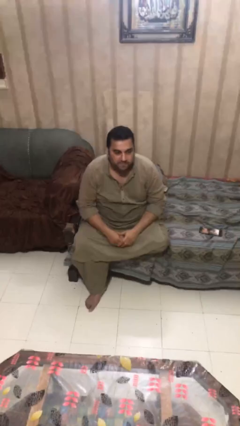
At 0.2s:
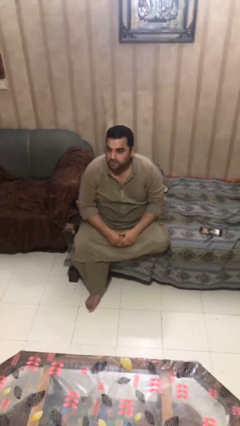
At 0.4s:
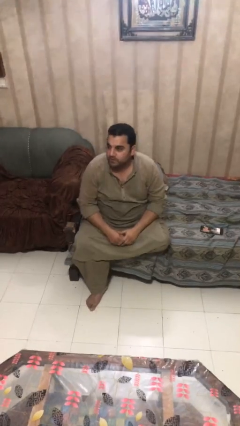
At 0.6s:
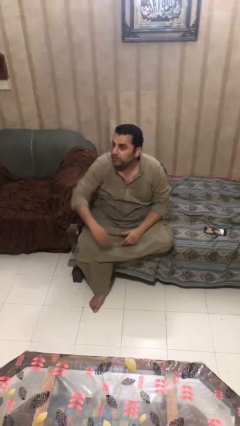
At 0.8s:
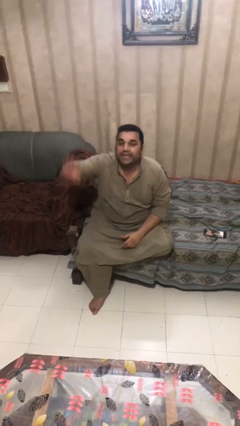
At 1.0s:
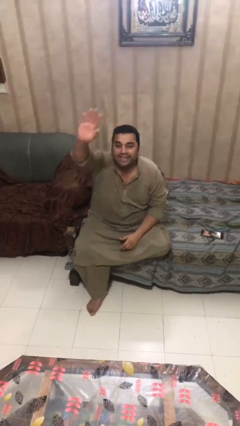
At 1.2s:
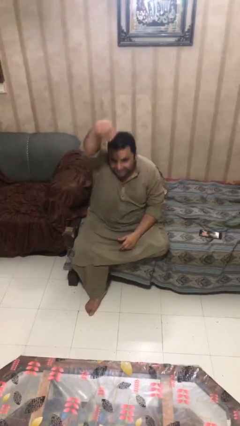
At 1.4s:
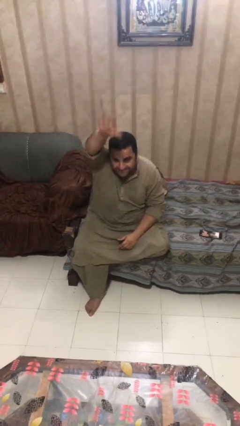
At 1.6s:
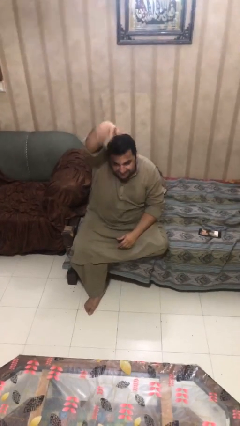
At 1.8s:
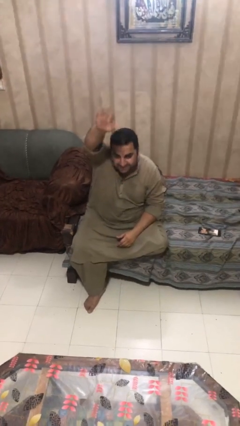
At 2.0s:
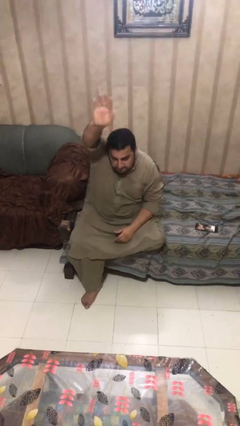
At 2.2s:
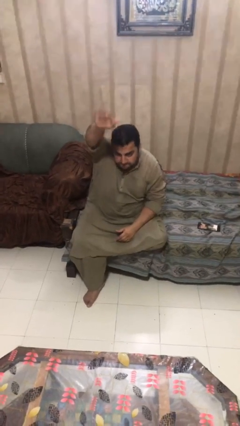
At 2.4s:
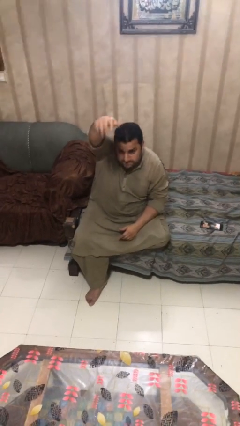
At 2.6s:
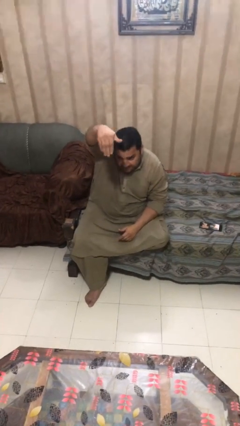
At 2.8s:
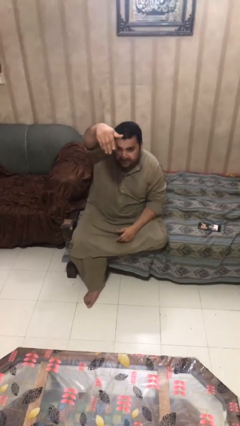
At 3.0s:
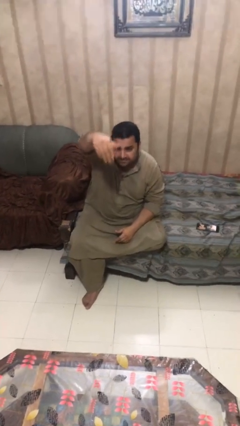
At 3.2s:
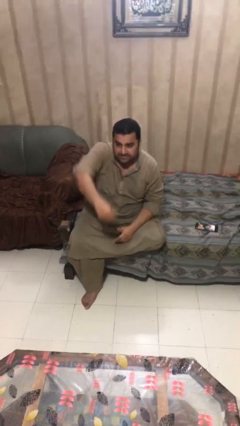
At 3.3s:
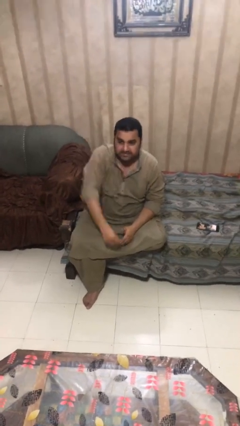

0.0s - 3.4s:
person gestures come here

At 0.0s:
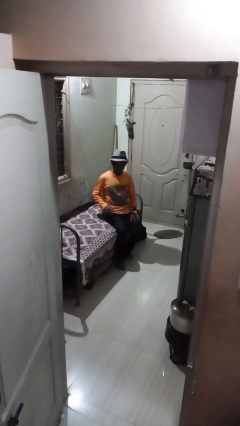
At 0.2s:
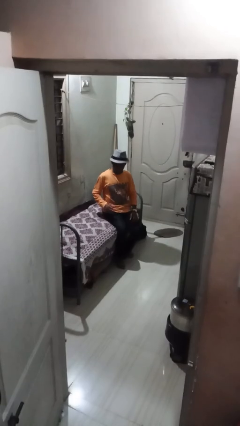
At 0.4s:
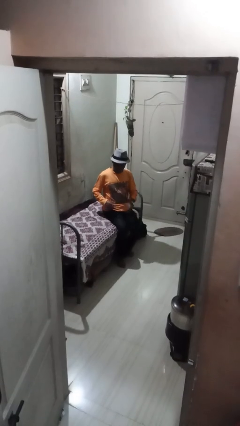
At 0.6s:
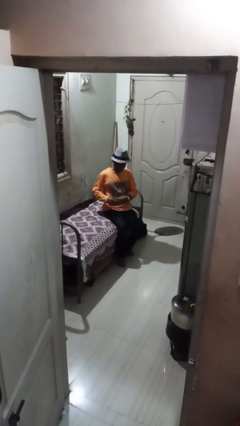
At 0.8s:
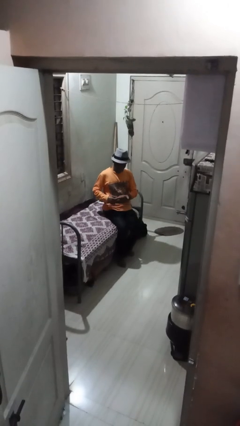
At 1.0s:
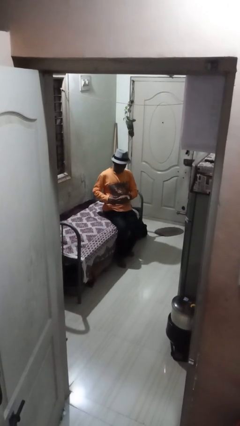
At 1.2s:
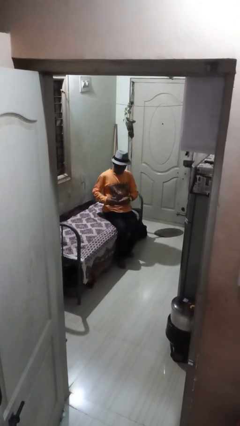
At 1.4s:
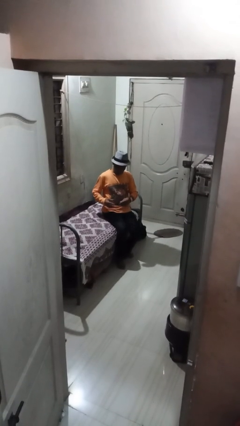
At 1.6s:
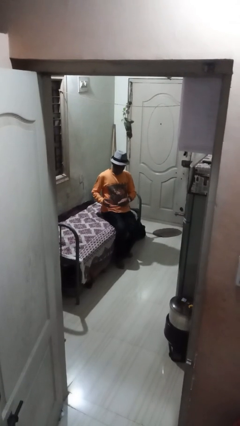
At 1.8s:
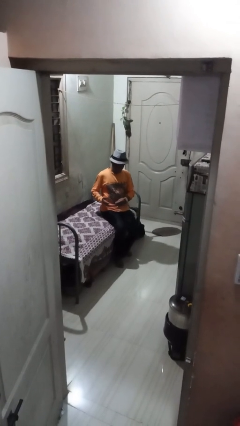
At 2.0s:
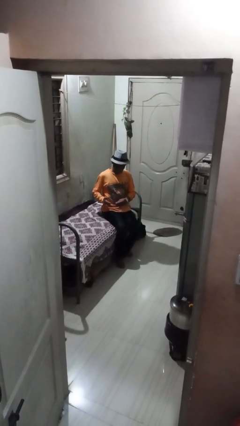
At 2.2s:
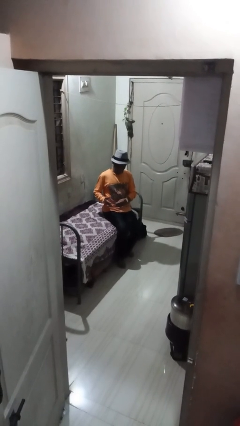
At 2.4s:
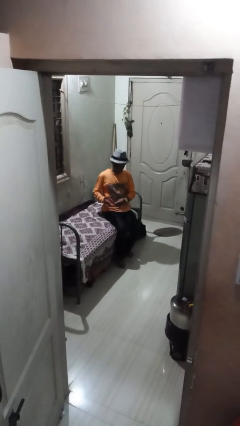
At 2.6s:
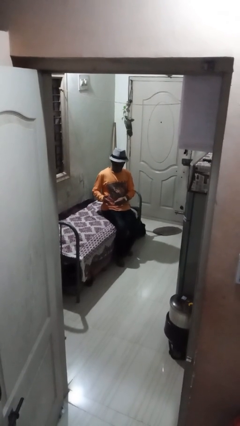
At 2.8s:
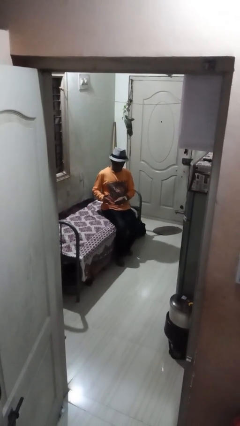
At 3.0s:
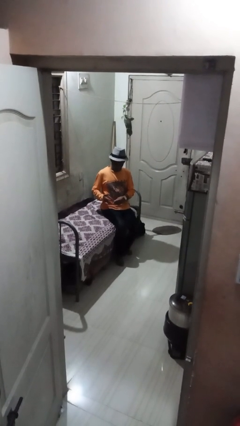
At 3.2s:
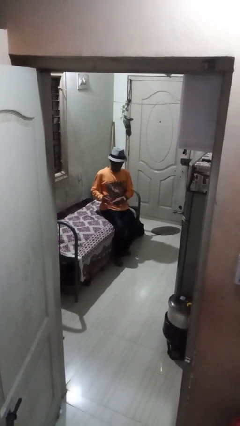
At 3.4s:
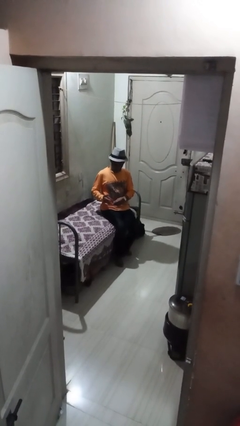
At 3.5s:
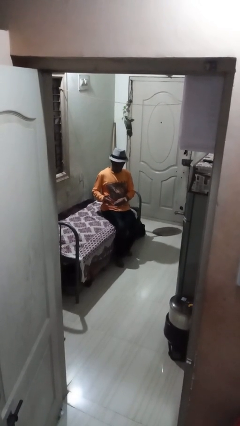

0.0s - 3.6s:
person takes off ring

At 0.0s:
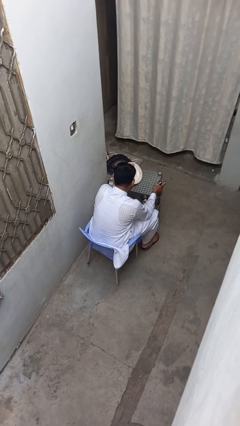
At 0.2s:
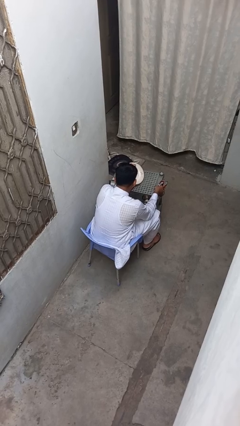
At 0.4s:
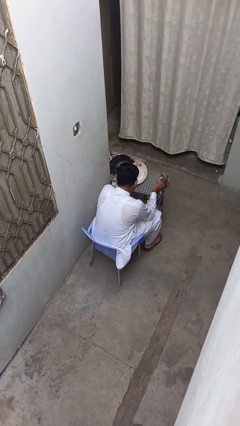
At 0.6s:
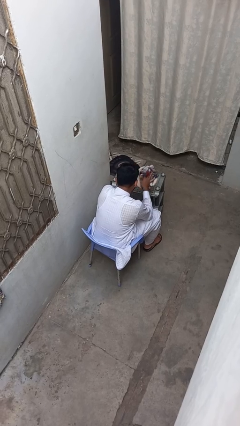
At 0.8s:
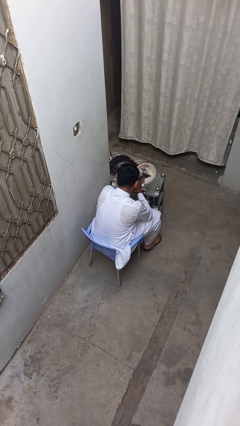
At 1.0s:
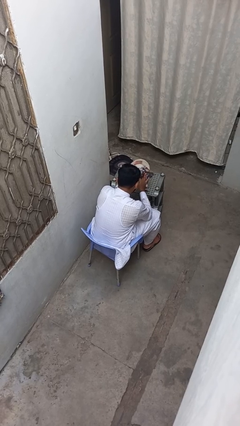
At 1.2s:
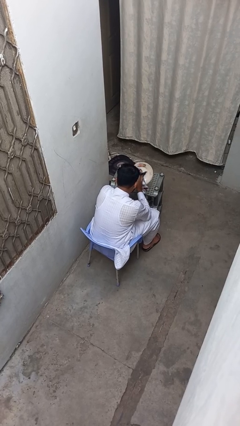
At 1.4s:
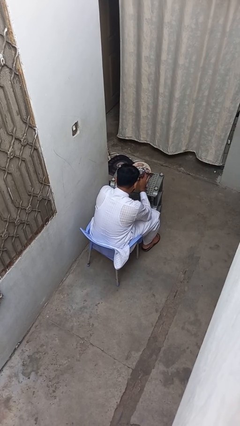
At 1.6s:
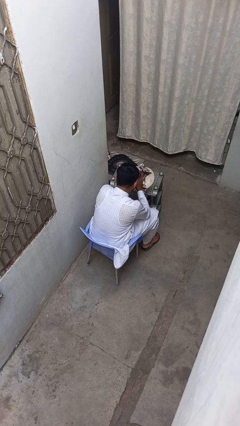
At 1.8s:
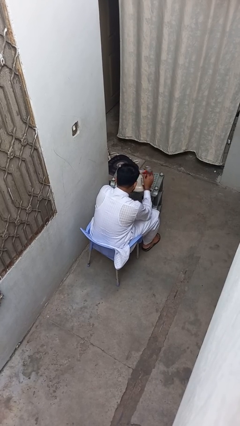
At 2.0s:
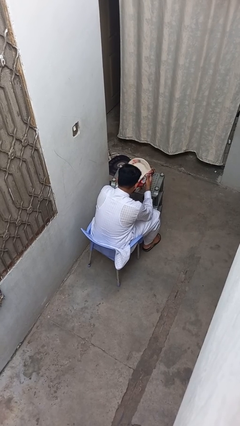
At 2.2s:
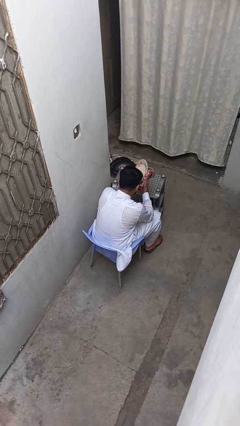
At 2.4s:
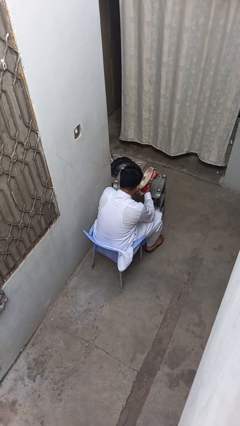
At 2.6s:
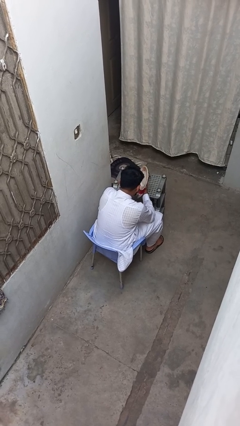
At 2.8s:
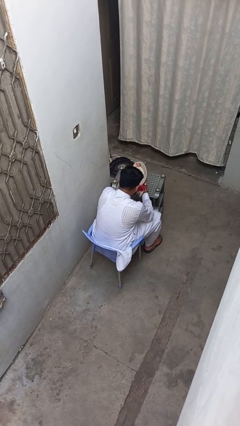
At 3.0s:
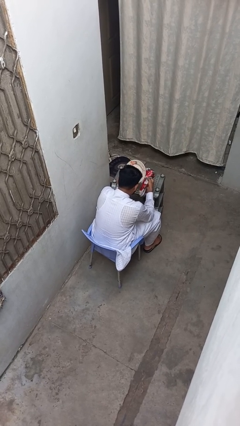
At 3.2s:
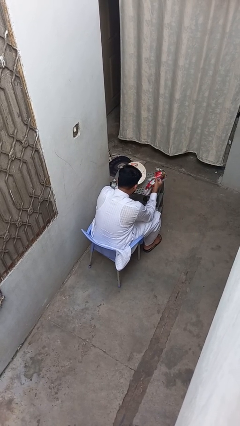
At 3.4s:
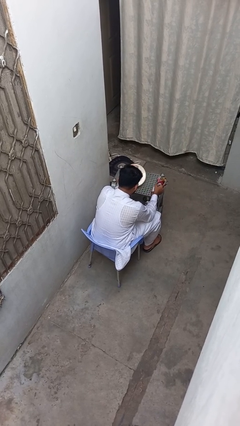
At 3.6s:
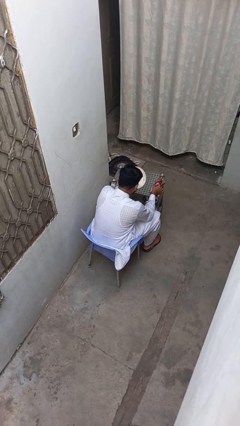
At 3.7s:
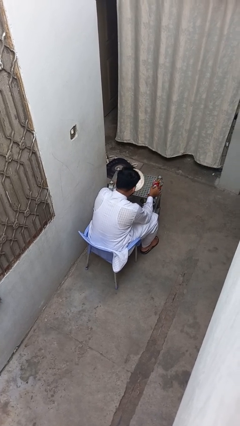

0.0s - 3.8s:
person dries dish

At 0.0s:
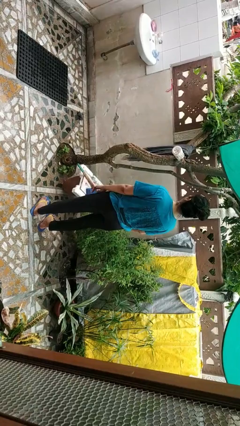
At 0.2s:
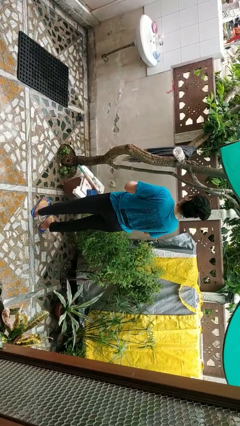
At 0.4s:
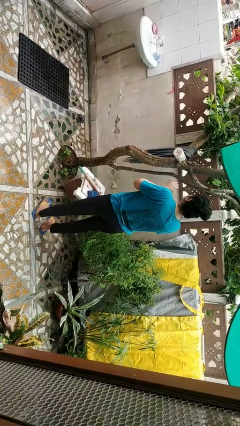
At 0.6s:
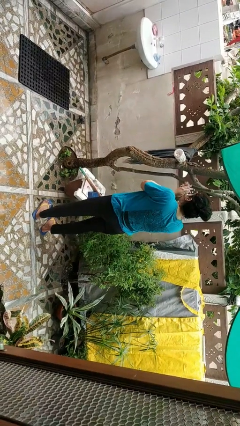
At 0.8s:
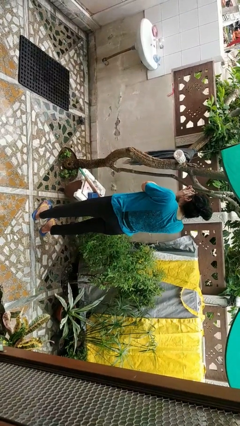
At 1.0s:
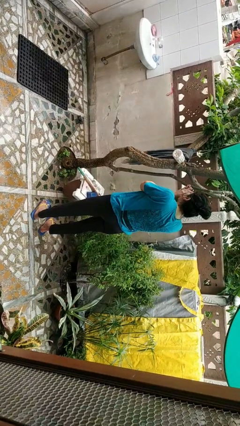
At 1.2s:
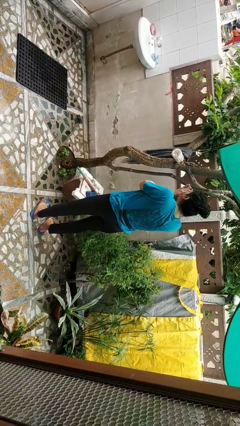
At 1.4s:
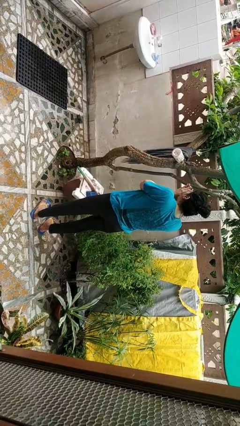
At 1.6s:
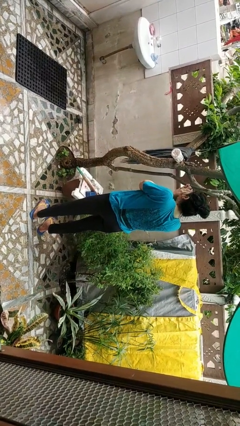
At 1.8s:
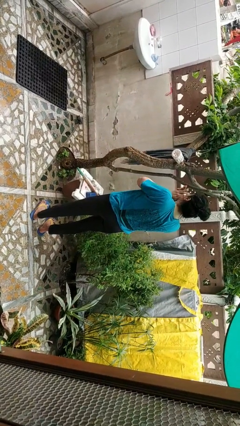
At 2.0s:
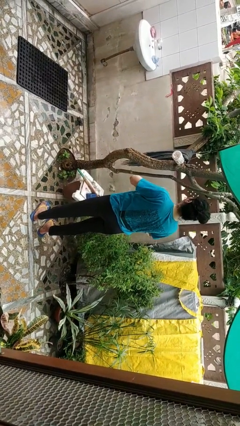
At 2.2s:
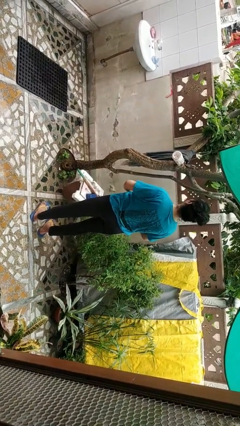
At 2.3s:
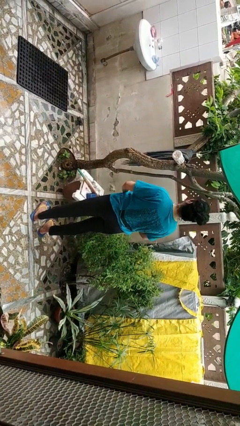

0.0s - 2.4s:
person blows into hands

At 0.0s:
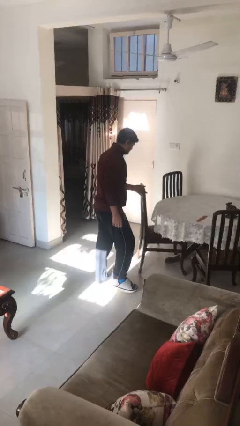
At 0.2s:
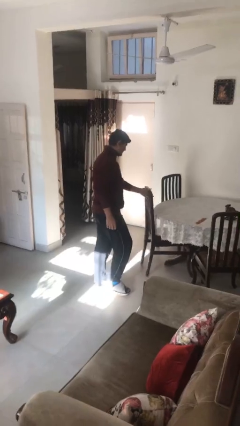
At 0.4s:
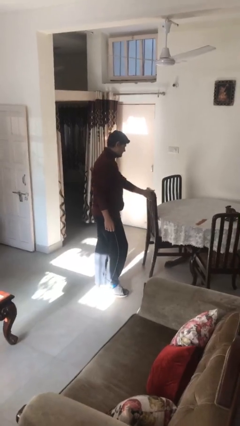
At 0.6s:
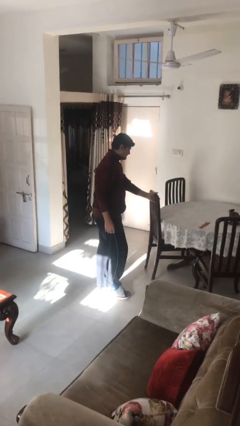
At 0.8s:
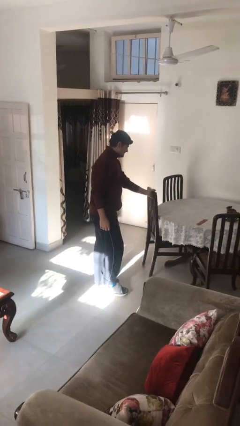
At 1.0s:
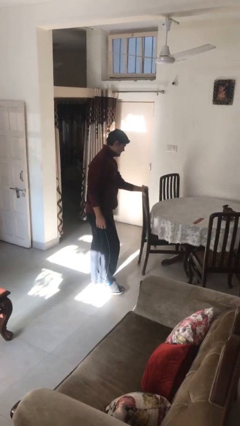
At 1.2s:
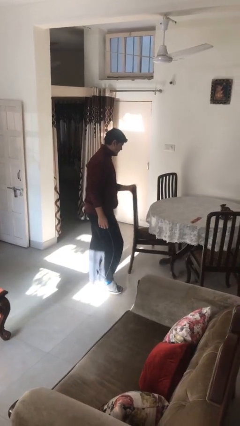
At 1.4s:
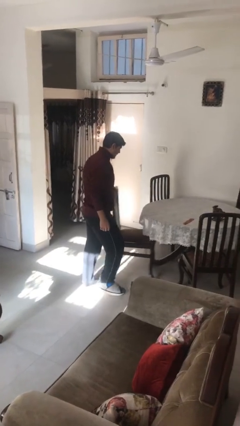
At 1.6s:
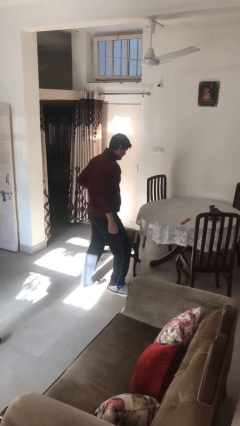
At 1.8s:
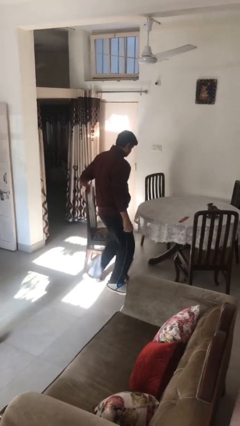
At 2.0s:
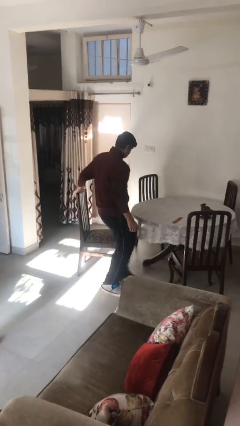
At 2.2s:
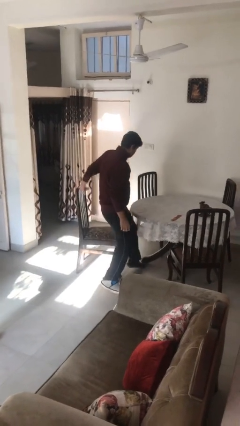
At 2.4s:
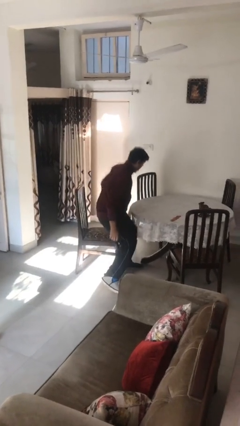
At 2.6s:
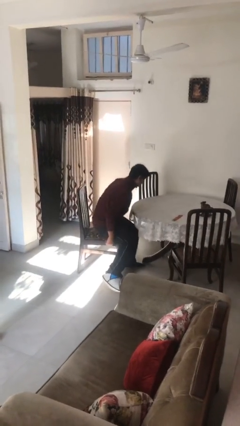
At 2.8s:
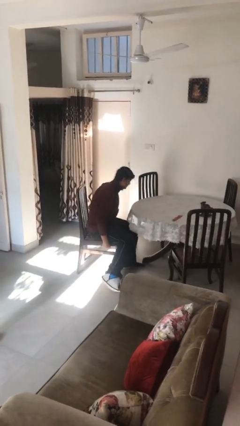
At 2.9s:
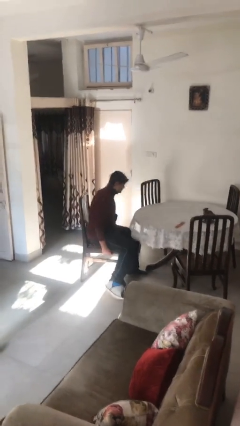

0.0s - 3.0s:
person sits down

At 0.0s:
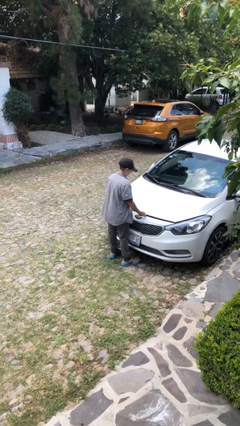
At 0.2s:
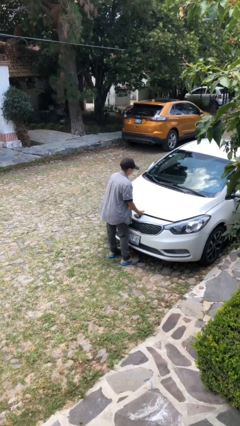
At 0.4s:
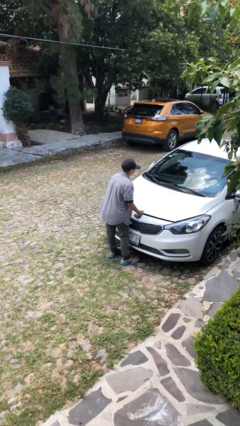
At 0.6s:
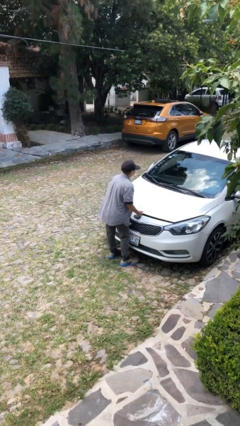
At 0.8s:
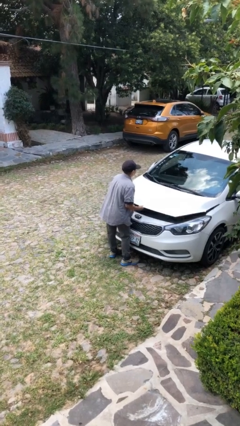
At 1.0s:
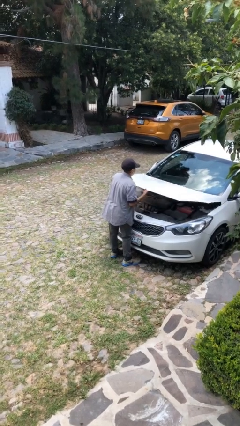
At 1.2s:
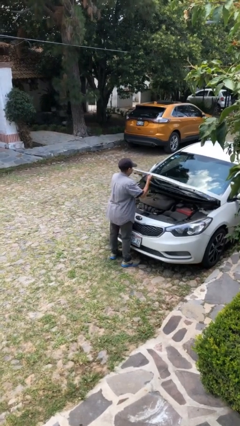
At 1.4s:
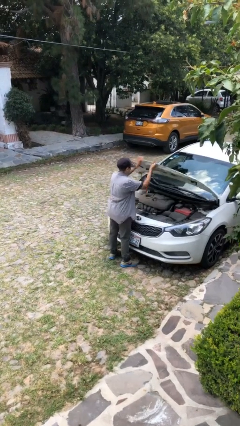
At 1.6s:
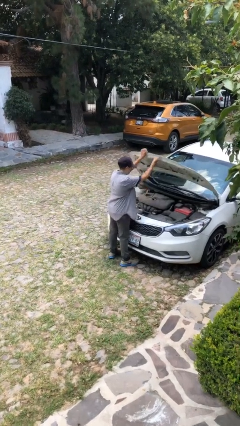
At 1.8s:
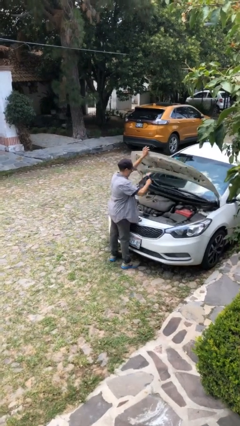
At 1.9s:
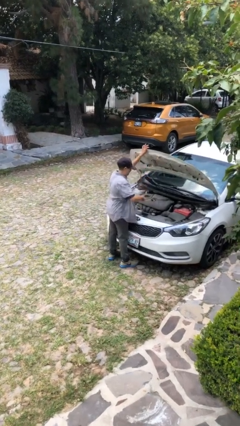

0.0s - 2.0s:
person opens car hood
